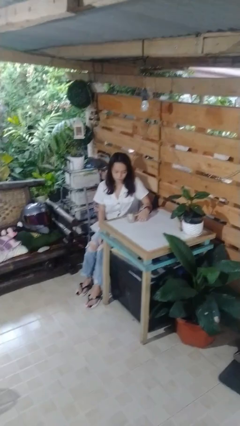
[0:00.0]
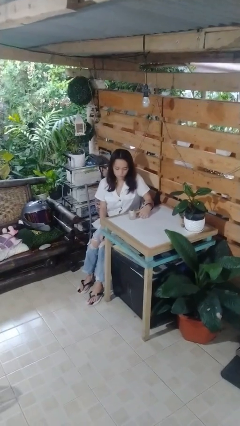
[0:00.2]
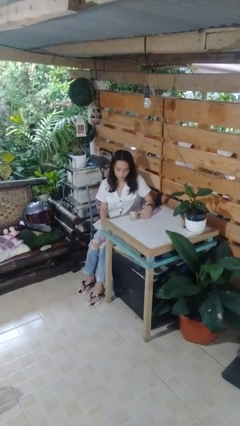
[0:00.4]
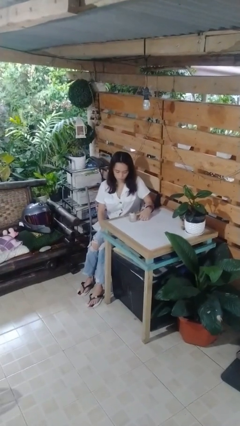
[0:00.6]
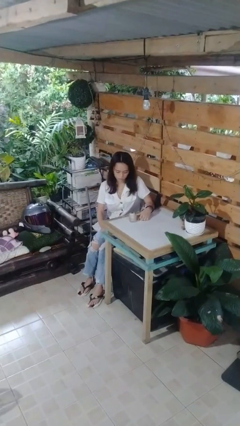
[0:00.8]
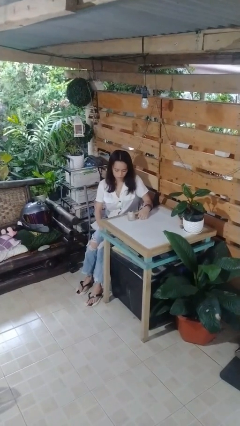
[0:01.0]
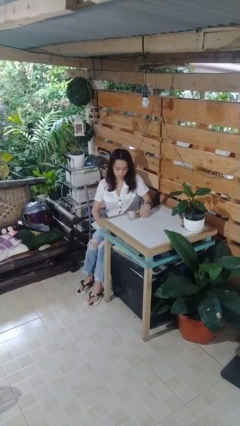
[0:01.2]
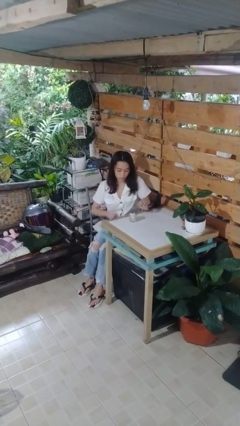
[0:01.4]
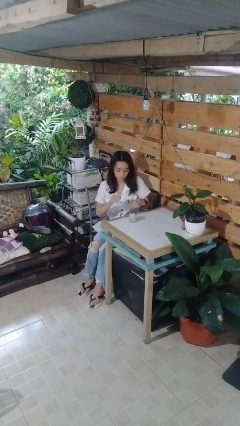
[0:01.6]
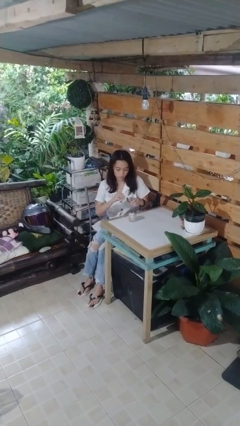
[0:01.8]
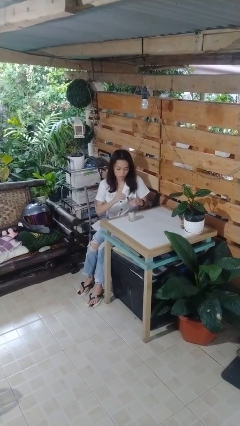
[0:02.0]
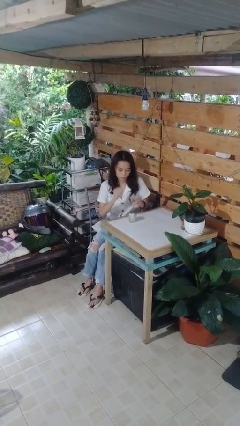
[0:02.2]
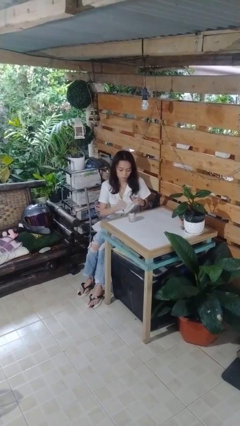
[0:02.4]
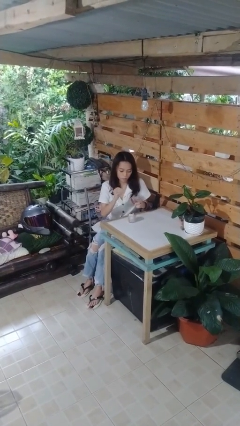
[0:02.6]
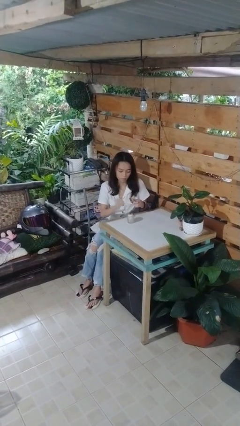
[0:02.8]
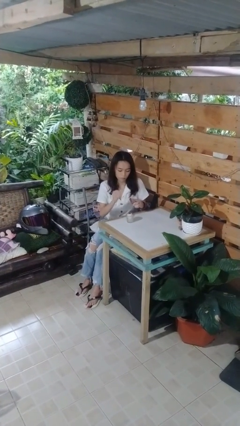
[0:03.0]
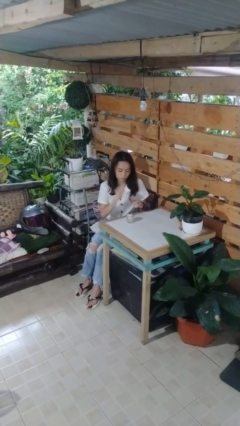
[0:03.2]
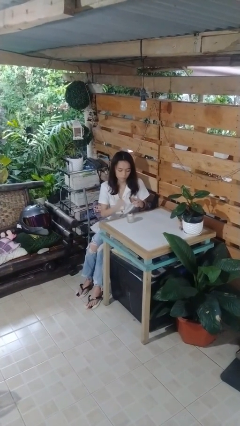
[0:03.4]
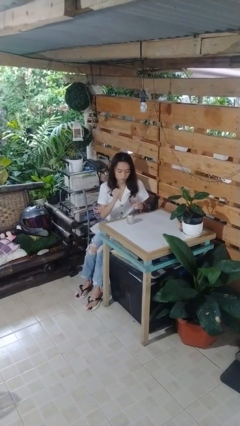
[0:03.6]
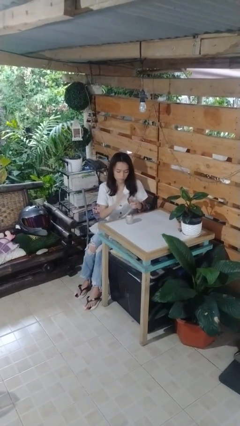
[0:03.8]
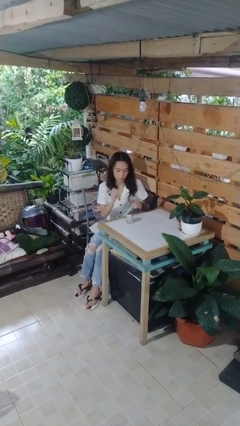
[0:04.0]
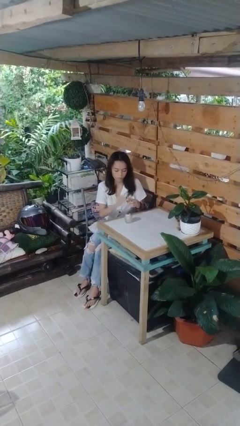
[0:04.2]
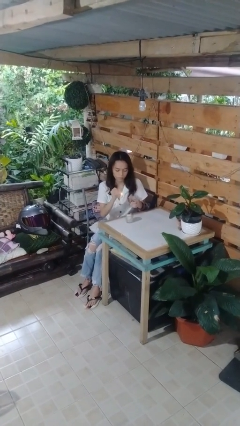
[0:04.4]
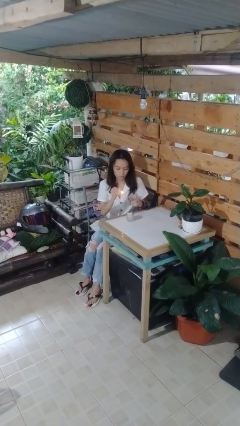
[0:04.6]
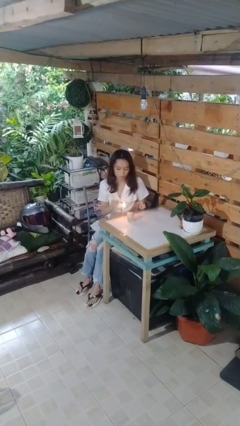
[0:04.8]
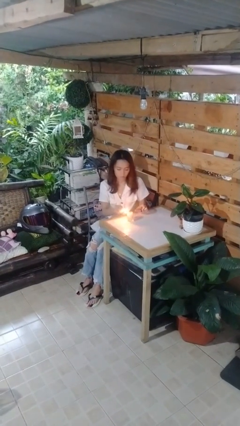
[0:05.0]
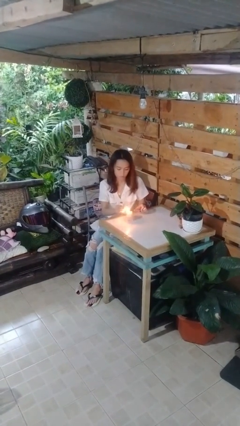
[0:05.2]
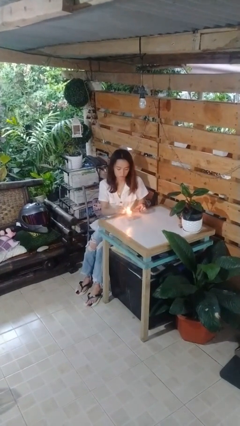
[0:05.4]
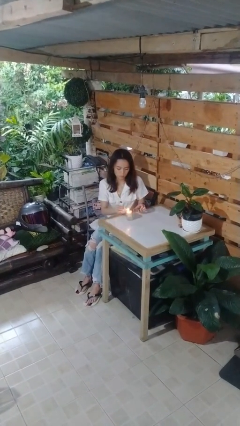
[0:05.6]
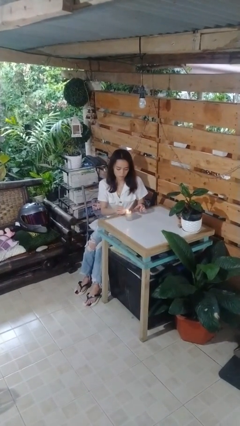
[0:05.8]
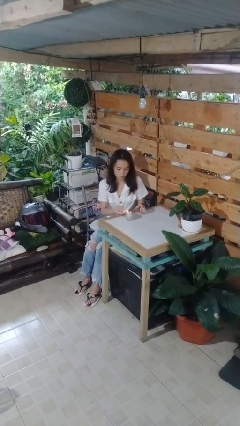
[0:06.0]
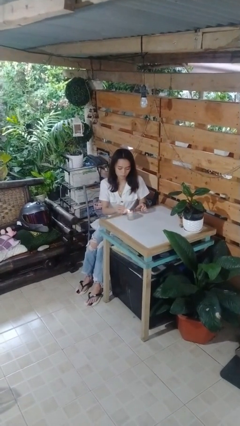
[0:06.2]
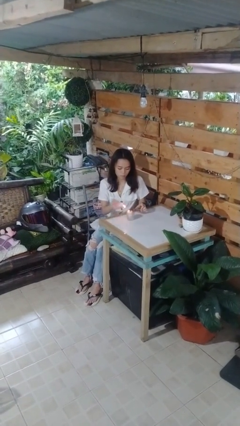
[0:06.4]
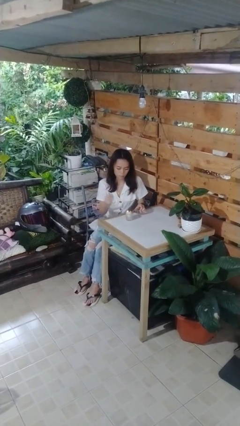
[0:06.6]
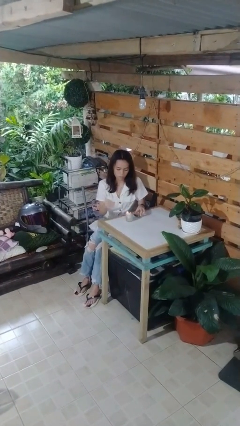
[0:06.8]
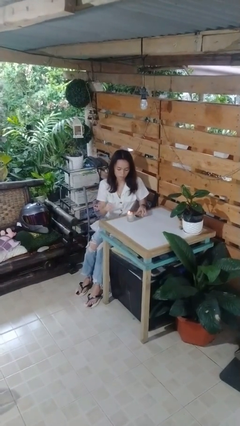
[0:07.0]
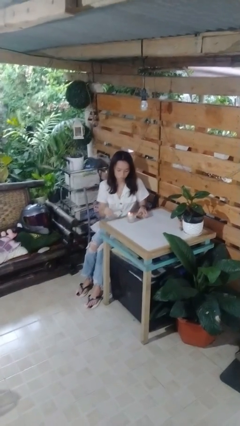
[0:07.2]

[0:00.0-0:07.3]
person lights candle

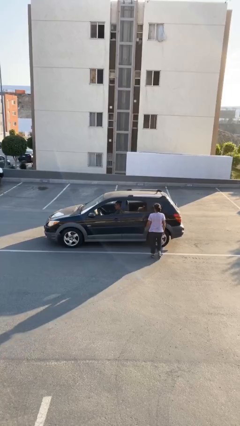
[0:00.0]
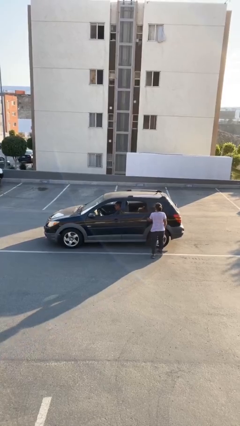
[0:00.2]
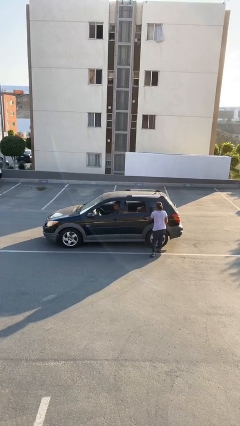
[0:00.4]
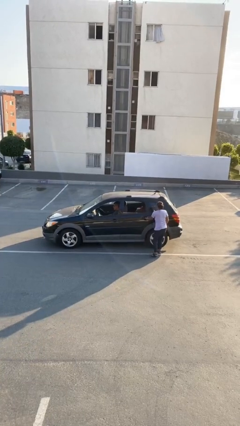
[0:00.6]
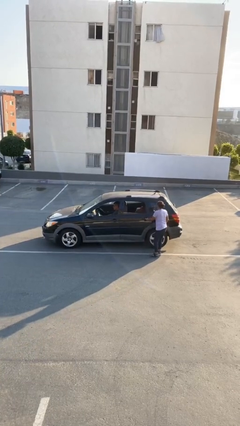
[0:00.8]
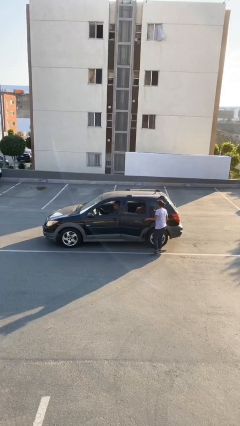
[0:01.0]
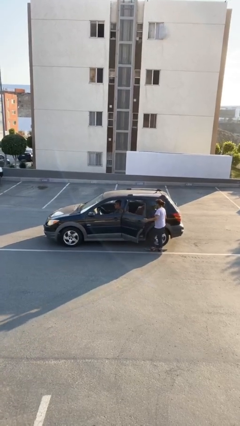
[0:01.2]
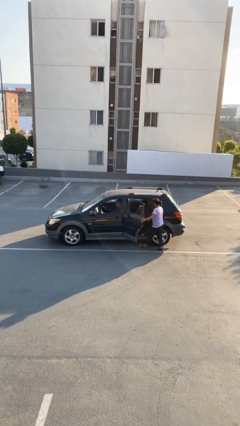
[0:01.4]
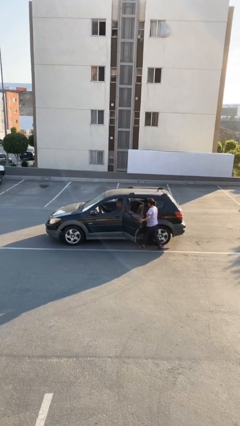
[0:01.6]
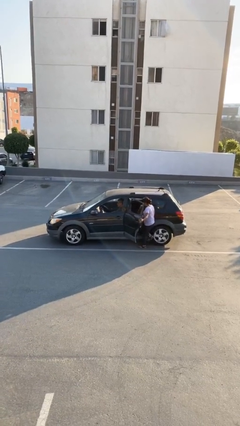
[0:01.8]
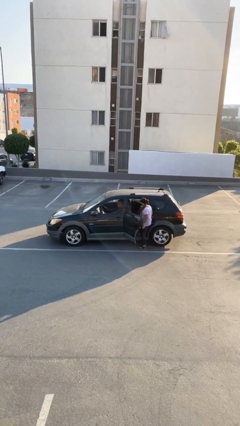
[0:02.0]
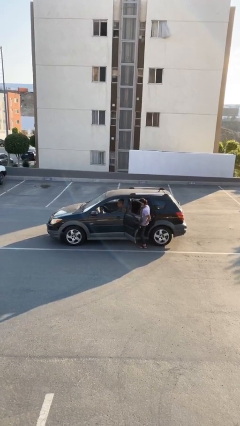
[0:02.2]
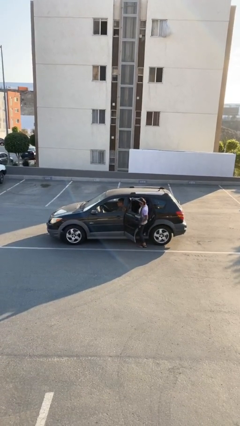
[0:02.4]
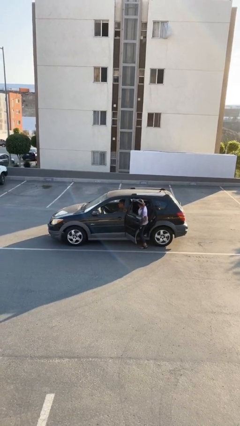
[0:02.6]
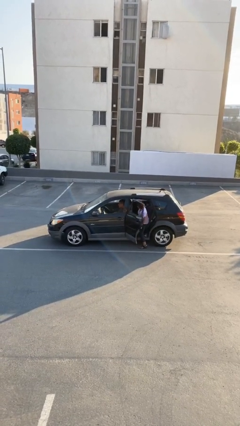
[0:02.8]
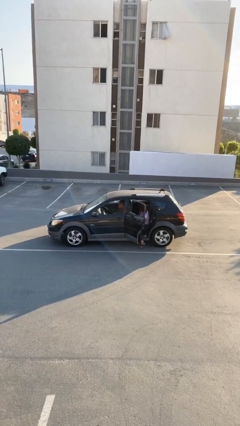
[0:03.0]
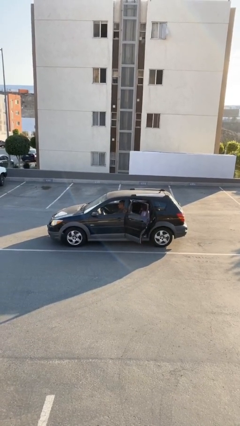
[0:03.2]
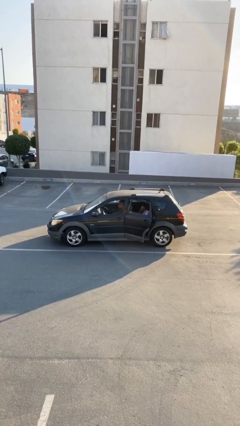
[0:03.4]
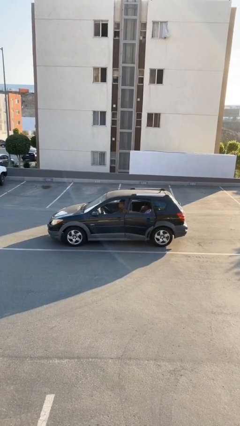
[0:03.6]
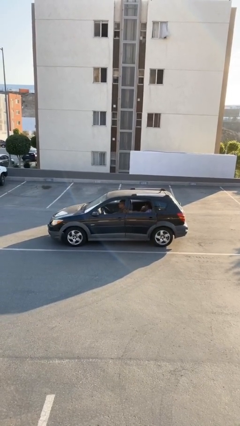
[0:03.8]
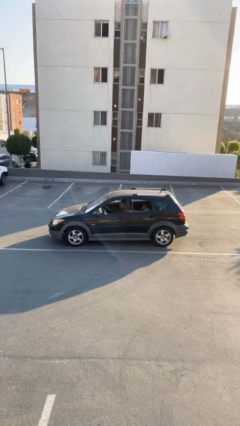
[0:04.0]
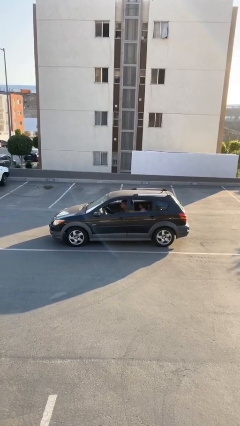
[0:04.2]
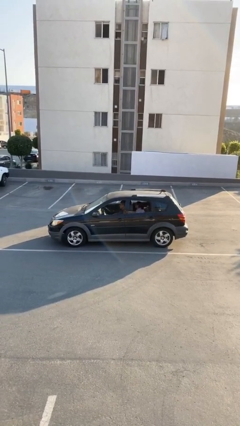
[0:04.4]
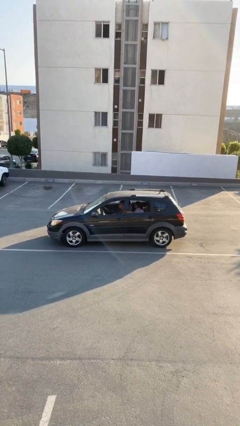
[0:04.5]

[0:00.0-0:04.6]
car picks up person

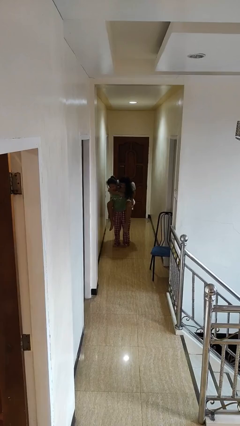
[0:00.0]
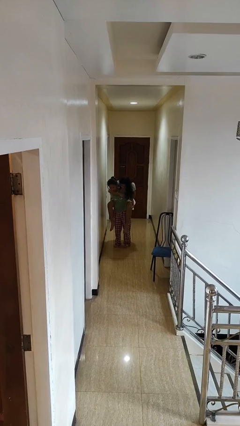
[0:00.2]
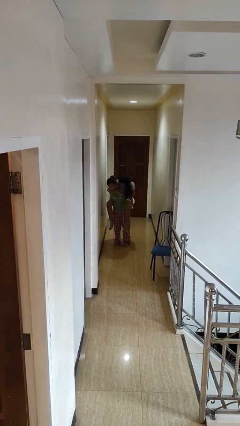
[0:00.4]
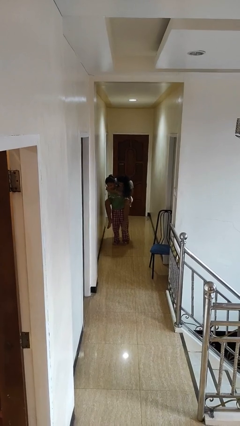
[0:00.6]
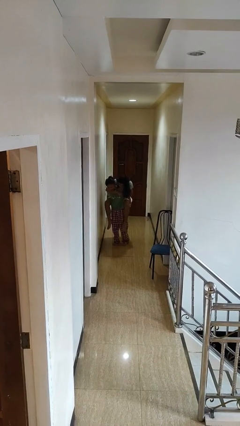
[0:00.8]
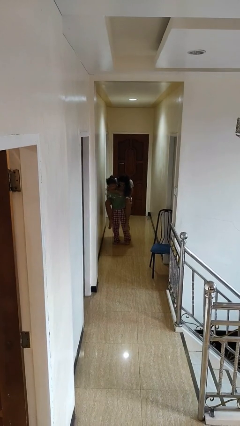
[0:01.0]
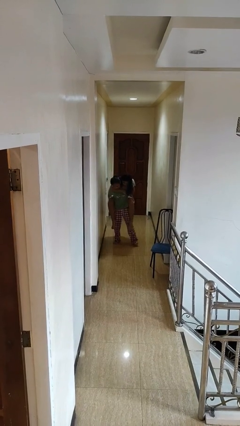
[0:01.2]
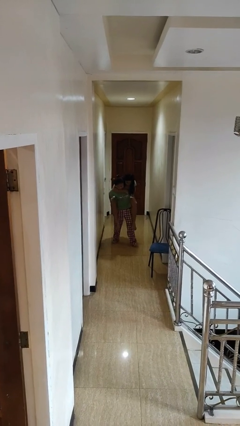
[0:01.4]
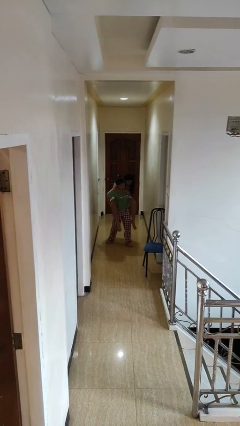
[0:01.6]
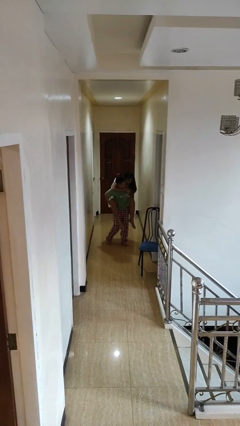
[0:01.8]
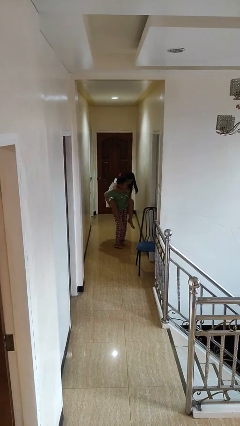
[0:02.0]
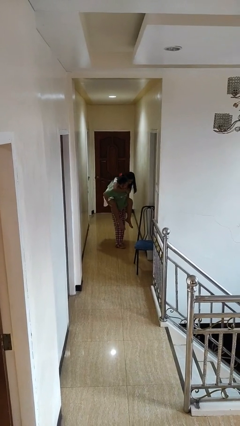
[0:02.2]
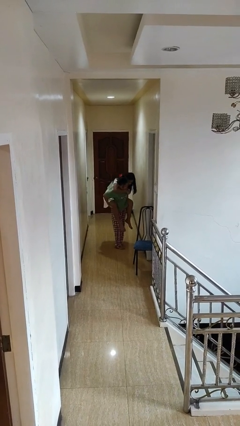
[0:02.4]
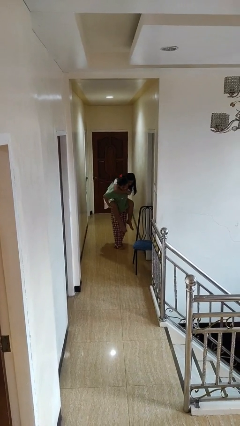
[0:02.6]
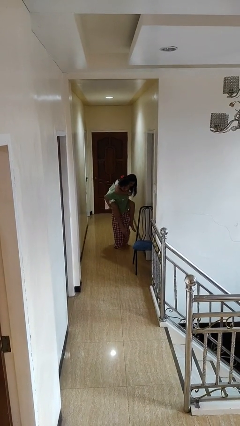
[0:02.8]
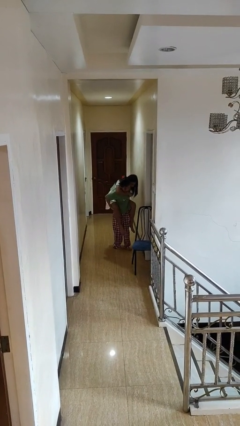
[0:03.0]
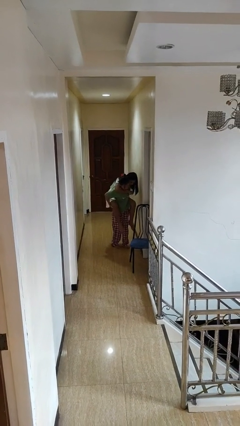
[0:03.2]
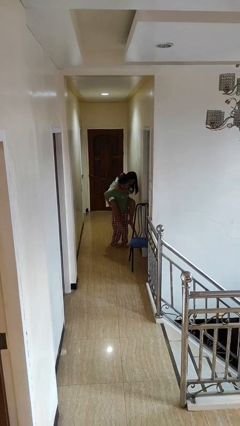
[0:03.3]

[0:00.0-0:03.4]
person carries person on back

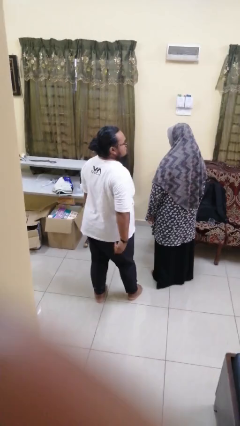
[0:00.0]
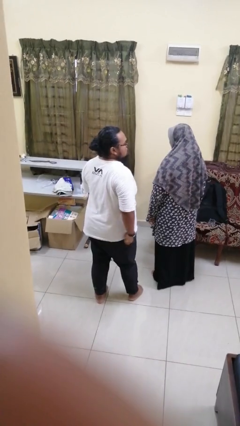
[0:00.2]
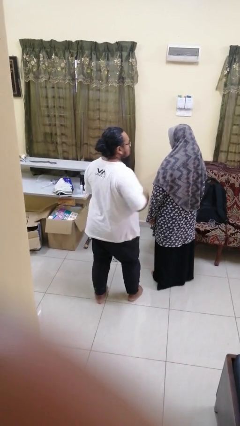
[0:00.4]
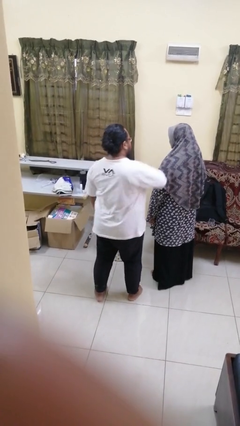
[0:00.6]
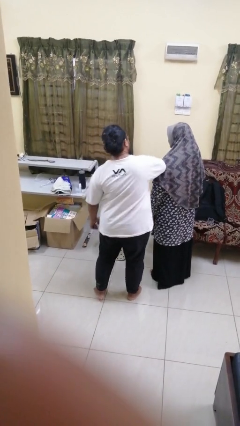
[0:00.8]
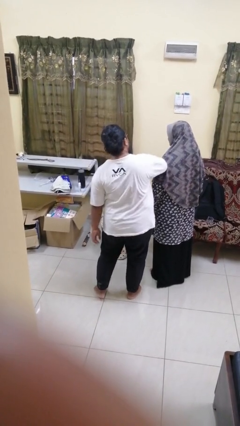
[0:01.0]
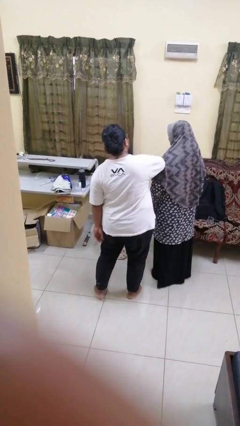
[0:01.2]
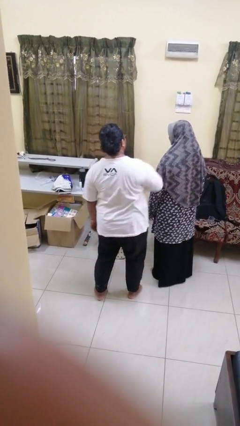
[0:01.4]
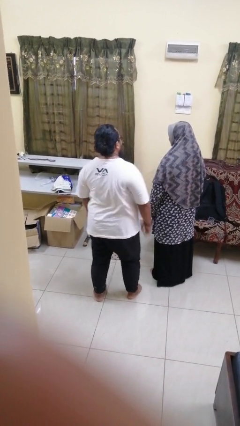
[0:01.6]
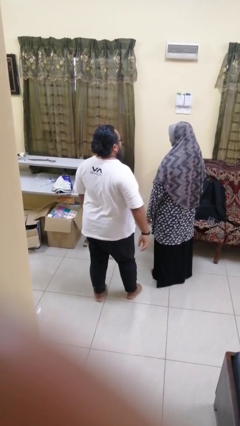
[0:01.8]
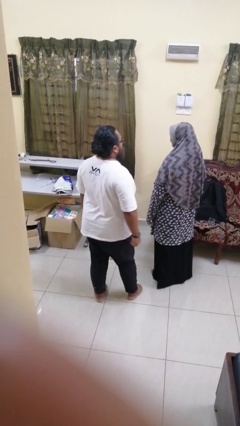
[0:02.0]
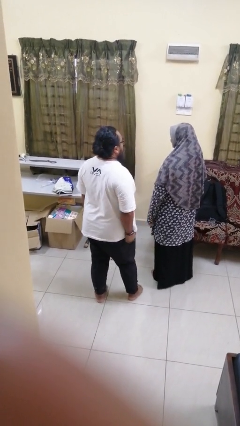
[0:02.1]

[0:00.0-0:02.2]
person nudges person with elbow

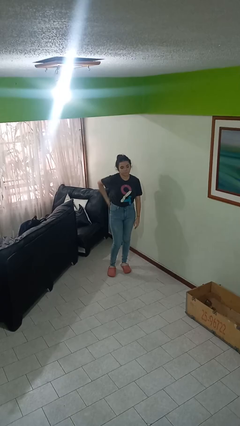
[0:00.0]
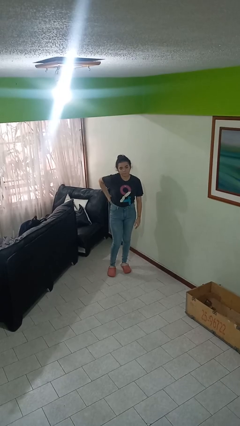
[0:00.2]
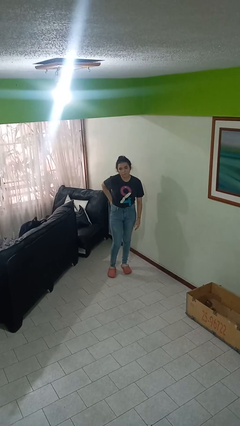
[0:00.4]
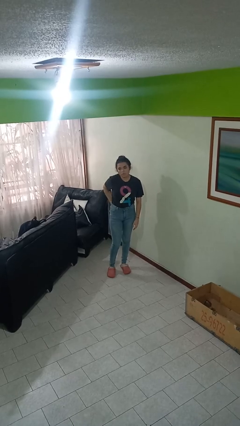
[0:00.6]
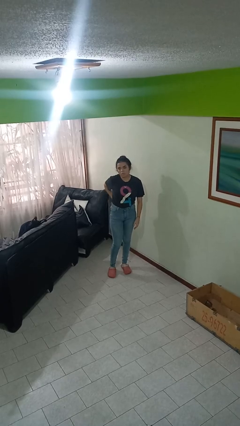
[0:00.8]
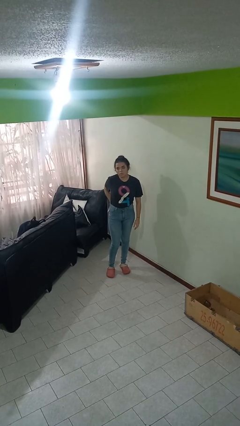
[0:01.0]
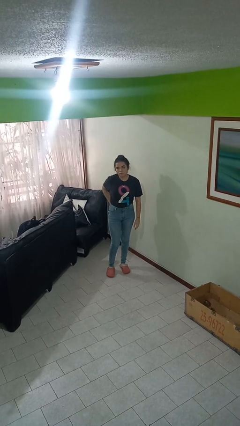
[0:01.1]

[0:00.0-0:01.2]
person puts phone into pocket
